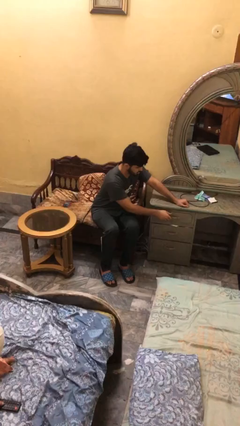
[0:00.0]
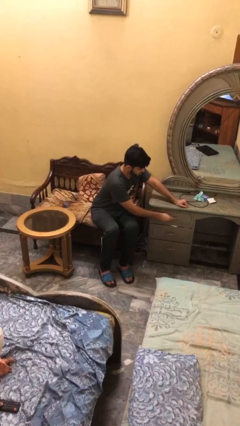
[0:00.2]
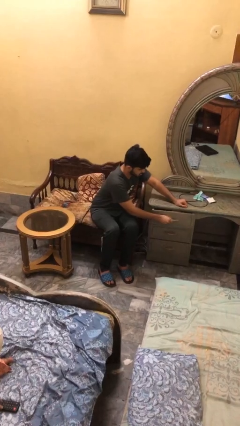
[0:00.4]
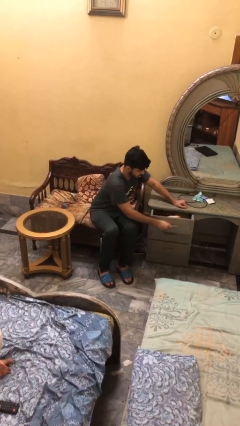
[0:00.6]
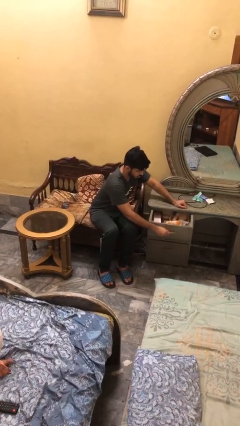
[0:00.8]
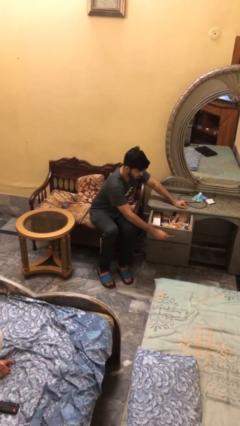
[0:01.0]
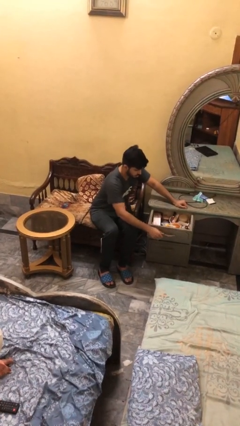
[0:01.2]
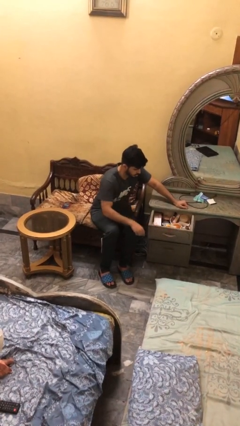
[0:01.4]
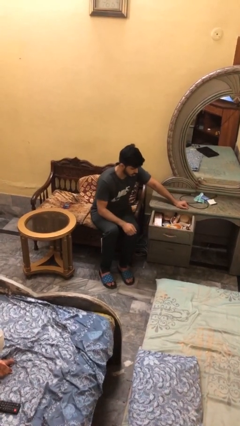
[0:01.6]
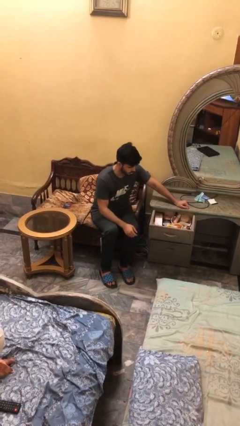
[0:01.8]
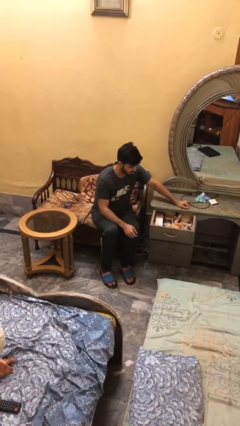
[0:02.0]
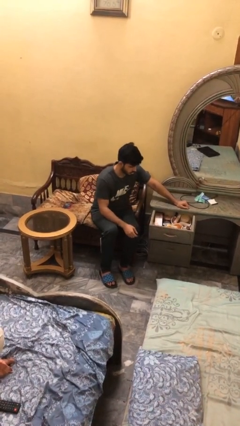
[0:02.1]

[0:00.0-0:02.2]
person opens dresser drawer

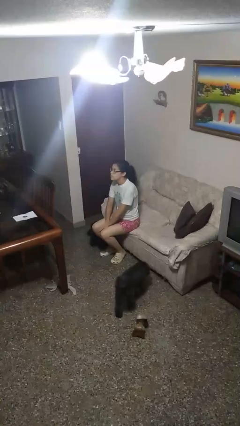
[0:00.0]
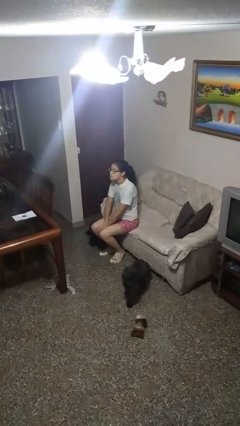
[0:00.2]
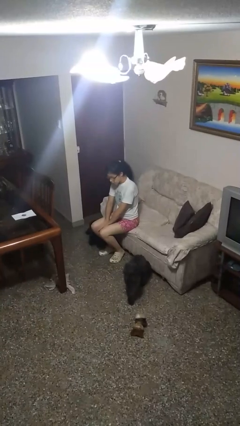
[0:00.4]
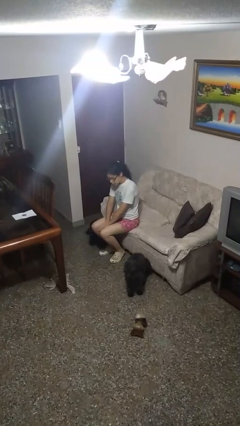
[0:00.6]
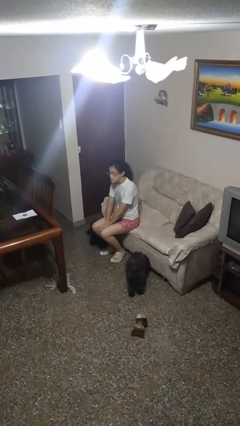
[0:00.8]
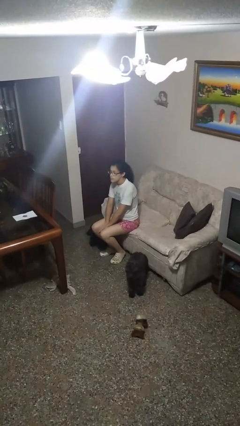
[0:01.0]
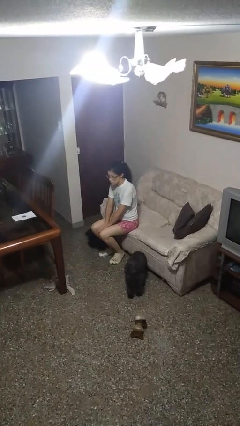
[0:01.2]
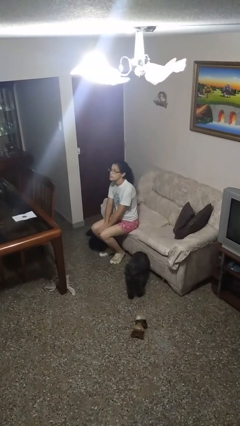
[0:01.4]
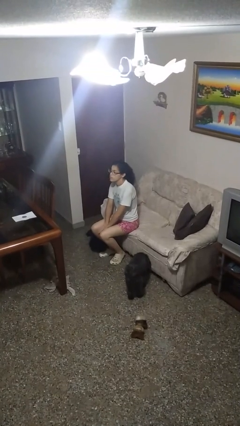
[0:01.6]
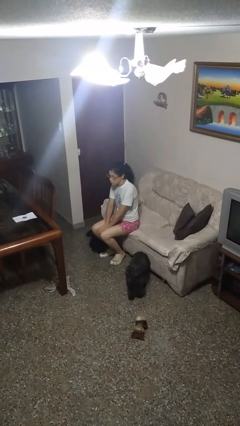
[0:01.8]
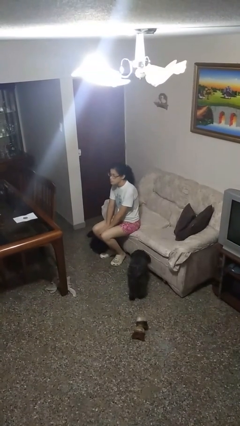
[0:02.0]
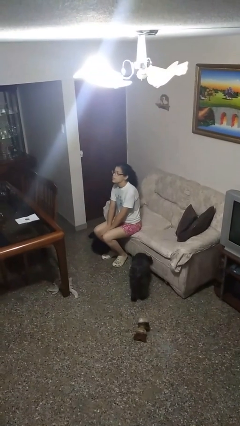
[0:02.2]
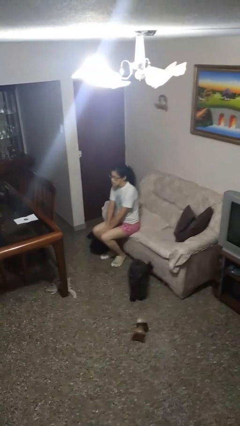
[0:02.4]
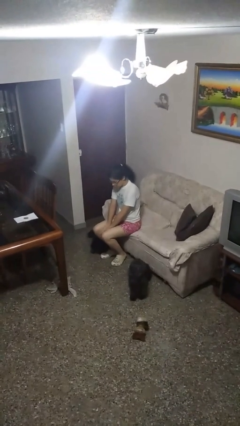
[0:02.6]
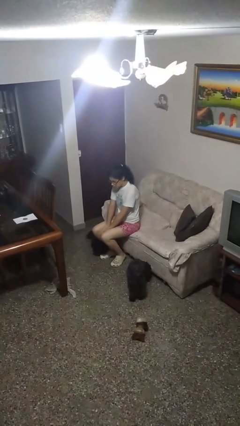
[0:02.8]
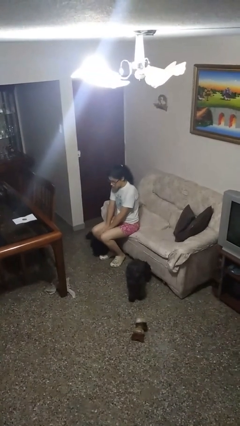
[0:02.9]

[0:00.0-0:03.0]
person nods head

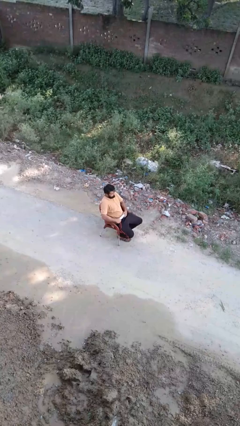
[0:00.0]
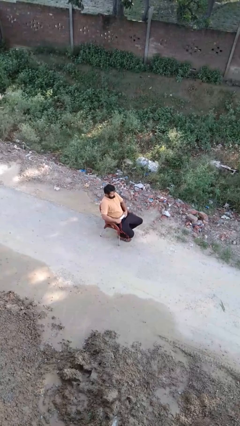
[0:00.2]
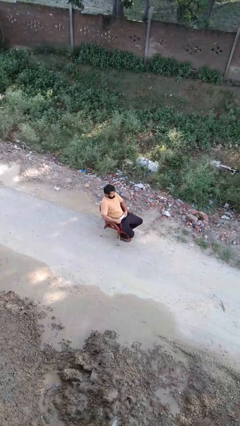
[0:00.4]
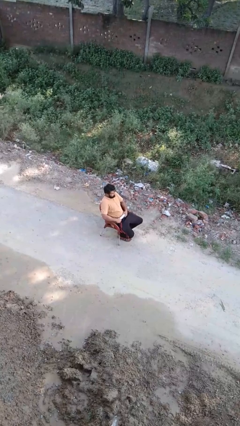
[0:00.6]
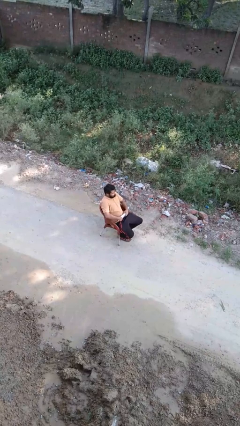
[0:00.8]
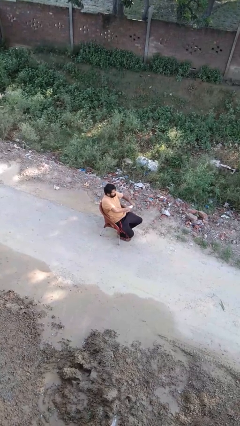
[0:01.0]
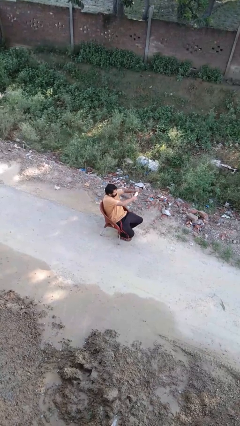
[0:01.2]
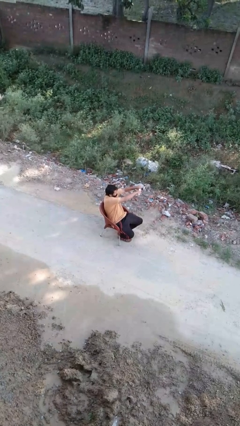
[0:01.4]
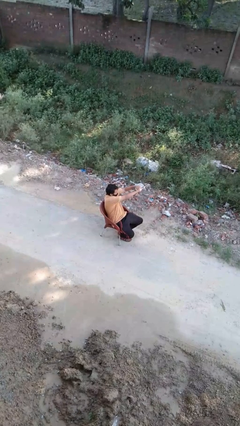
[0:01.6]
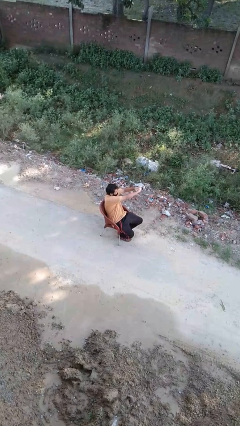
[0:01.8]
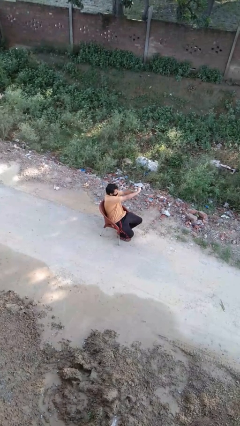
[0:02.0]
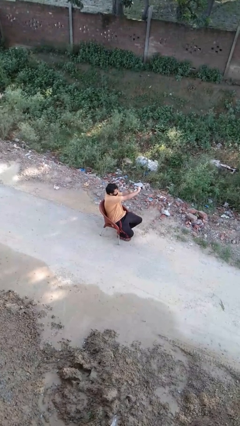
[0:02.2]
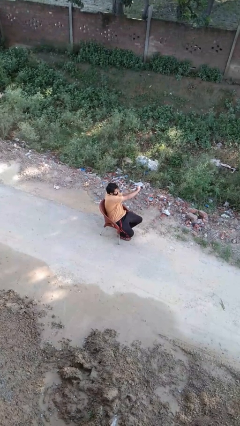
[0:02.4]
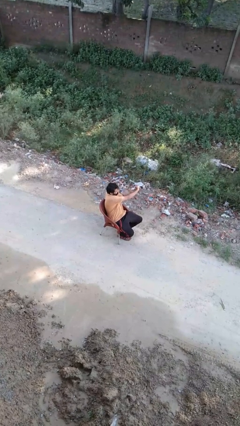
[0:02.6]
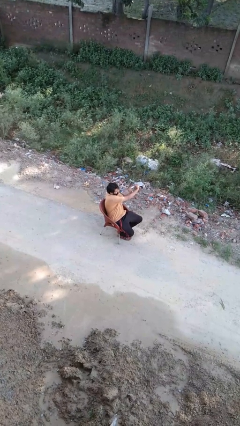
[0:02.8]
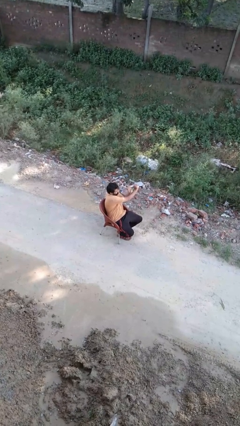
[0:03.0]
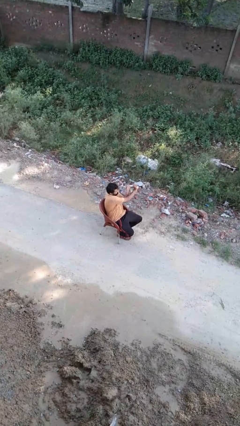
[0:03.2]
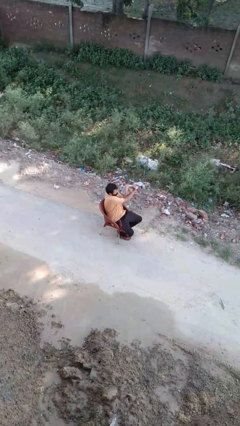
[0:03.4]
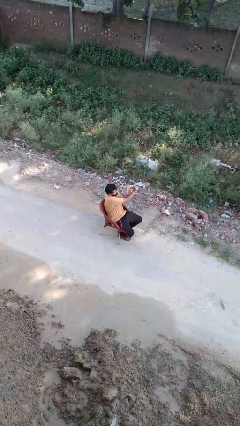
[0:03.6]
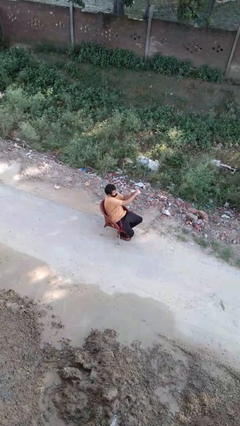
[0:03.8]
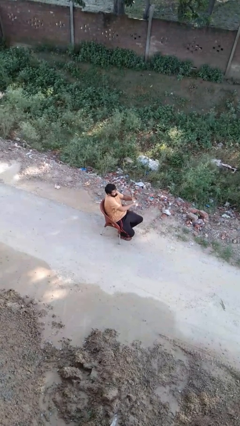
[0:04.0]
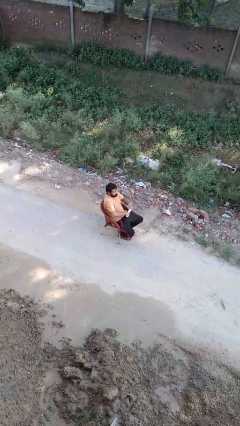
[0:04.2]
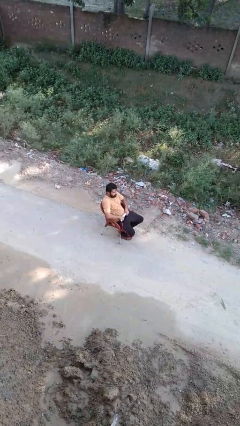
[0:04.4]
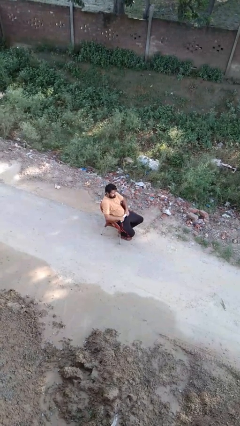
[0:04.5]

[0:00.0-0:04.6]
person squeezes object

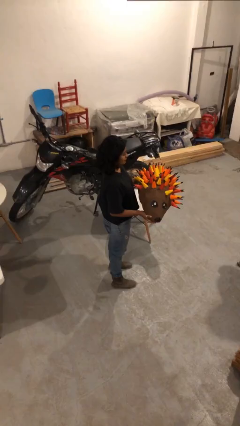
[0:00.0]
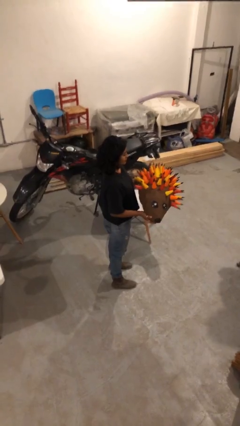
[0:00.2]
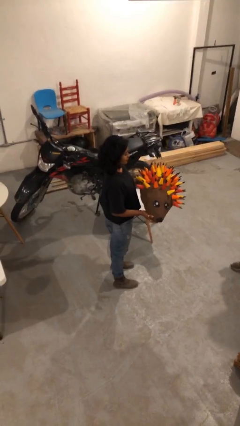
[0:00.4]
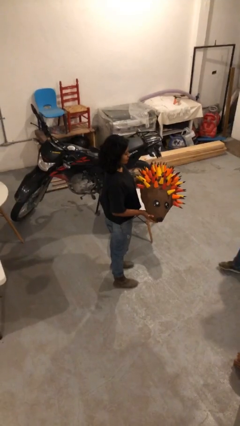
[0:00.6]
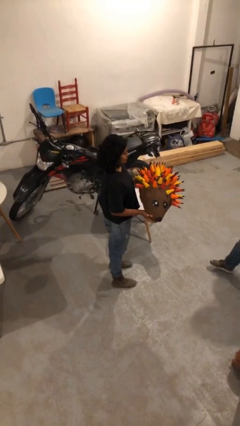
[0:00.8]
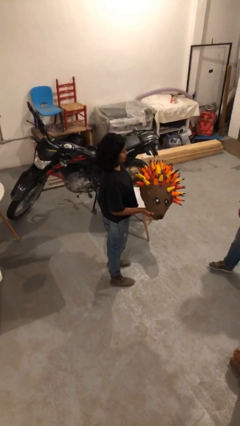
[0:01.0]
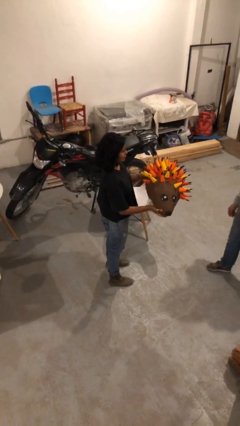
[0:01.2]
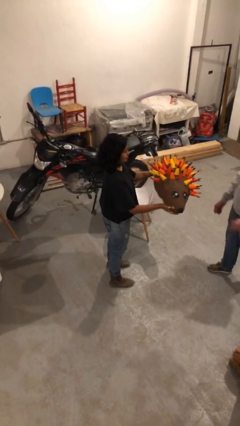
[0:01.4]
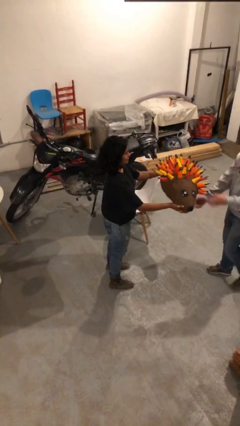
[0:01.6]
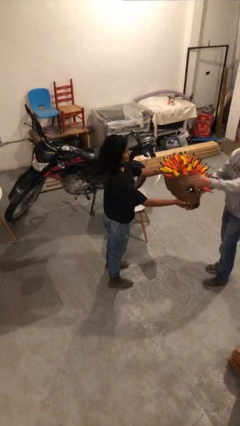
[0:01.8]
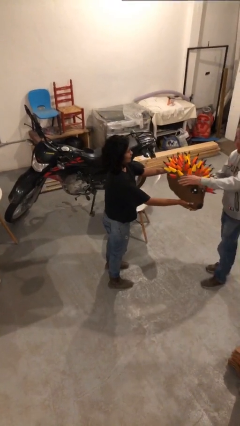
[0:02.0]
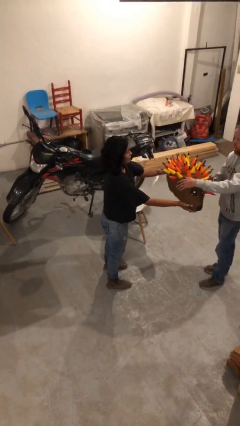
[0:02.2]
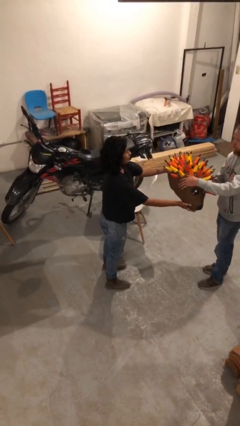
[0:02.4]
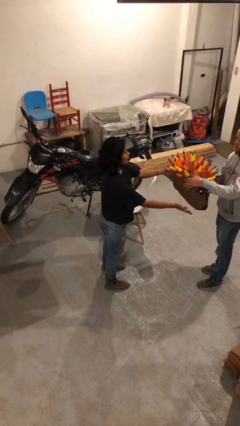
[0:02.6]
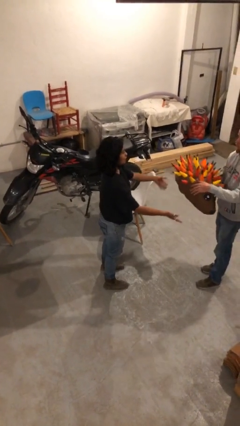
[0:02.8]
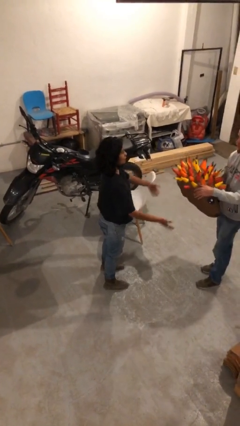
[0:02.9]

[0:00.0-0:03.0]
person transfers object to person

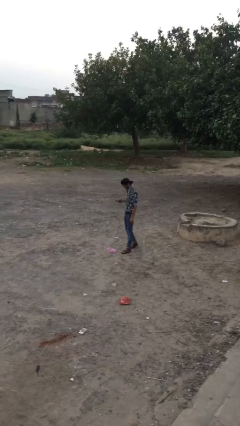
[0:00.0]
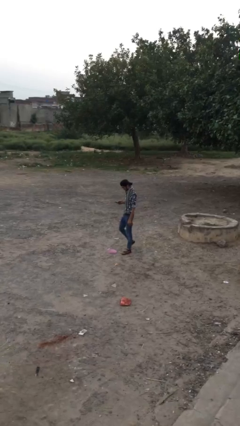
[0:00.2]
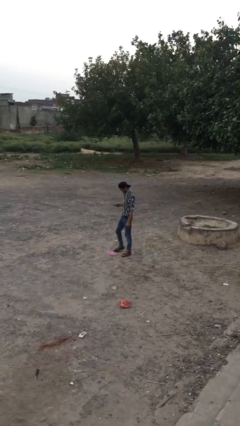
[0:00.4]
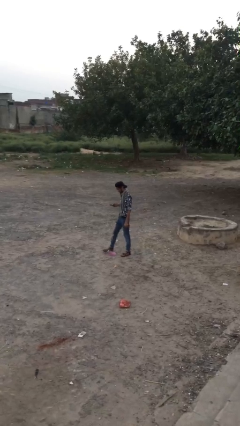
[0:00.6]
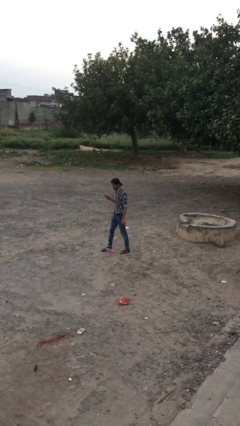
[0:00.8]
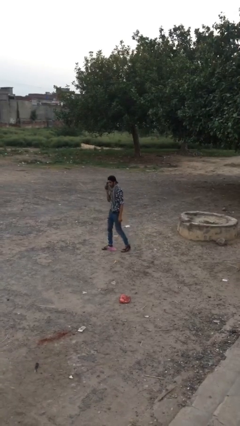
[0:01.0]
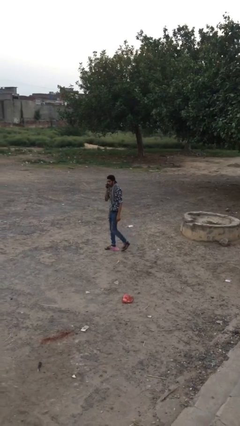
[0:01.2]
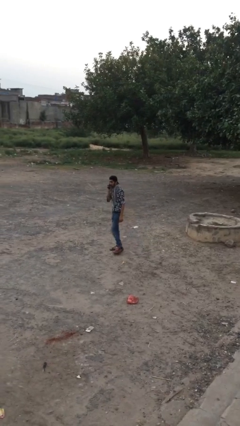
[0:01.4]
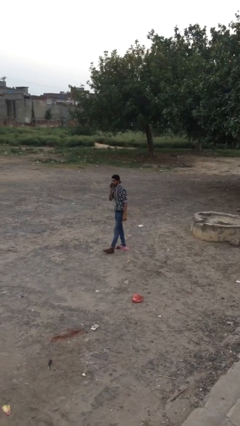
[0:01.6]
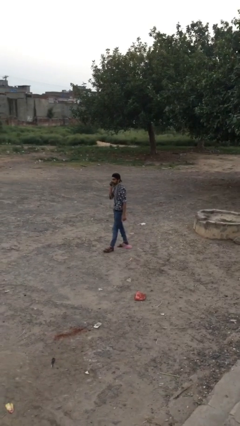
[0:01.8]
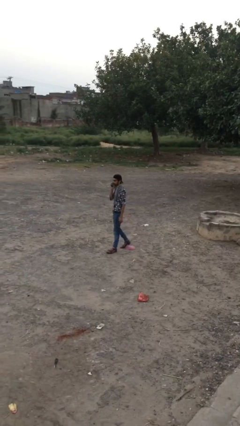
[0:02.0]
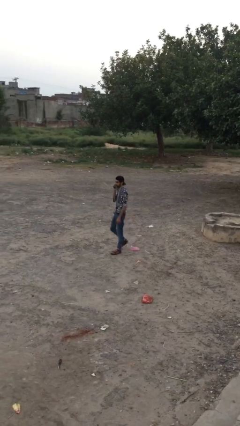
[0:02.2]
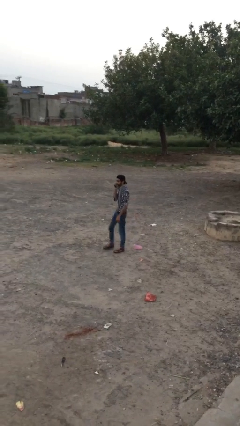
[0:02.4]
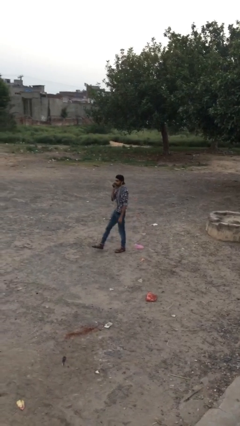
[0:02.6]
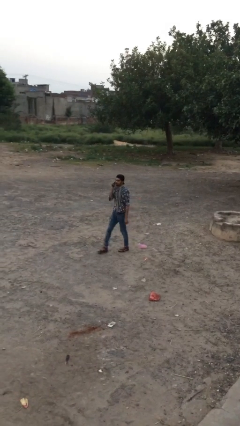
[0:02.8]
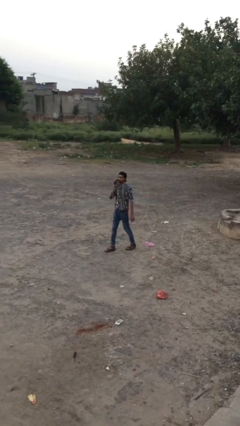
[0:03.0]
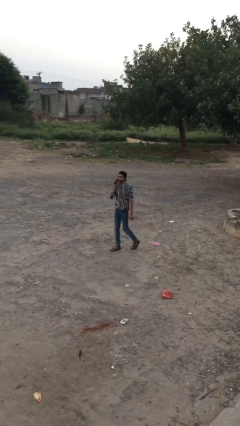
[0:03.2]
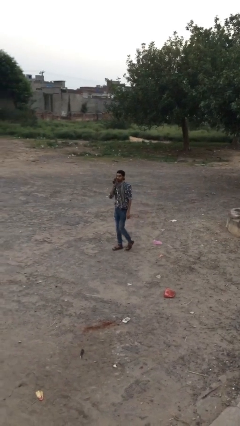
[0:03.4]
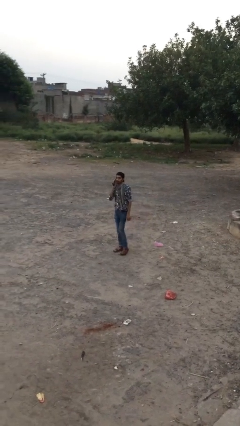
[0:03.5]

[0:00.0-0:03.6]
person talks on phone

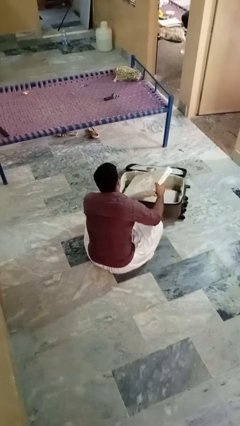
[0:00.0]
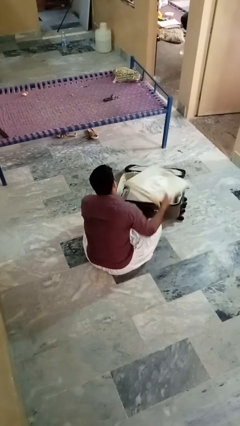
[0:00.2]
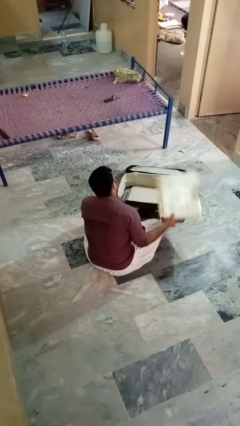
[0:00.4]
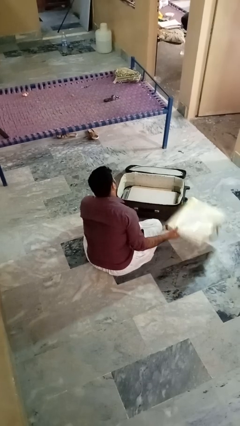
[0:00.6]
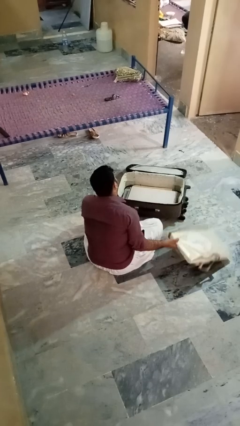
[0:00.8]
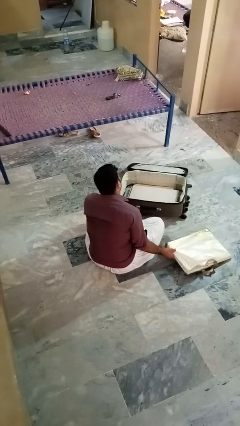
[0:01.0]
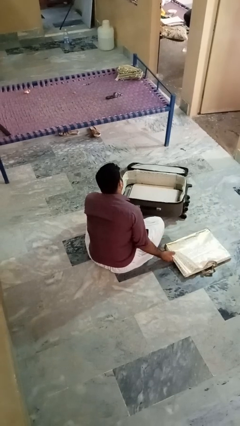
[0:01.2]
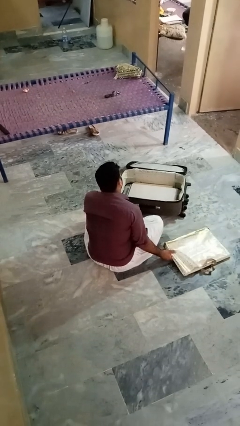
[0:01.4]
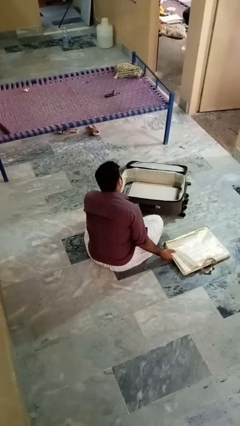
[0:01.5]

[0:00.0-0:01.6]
person takes object from bag
